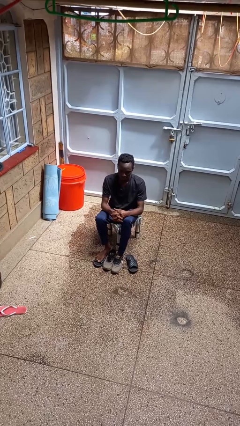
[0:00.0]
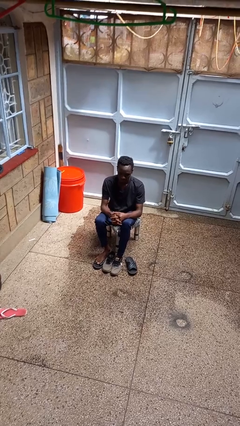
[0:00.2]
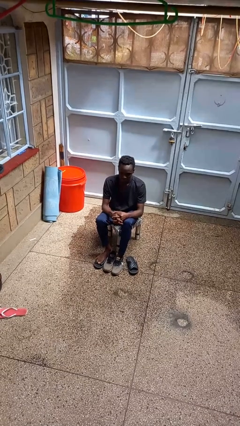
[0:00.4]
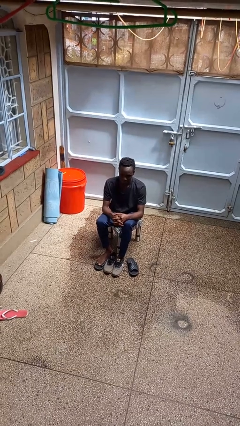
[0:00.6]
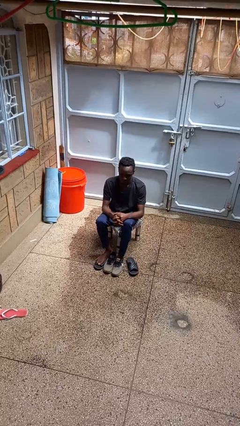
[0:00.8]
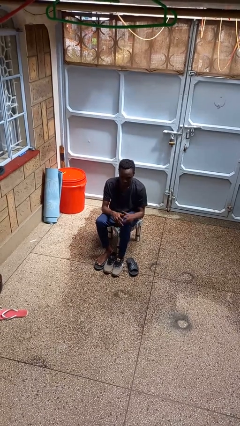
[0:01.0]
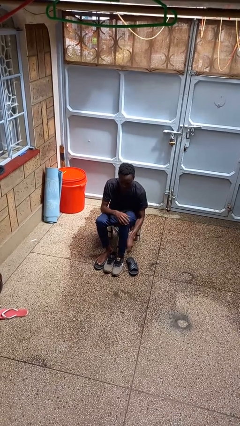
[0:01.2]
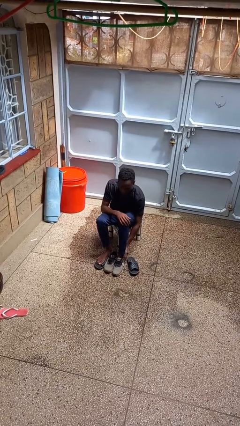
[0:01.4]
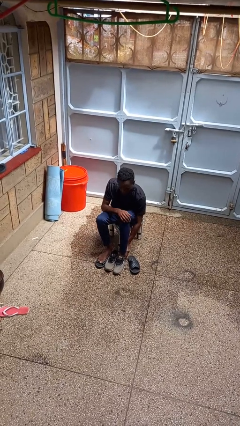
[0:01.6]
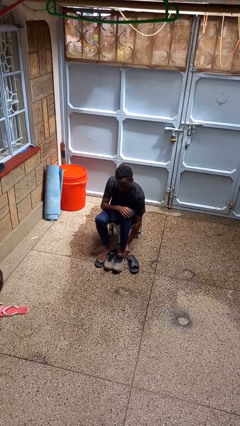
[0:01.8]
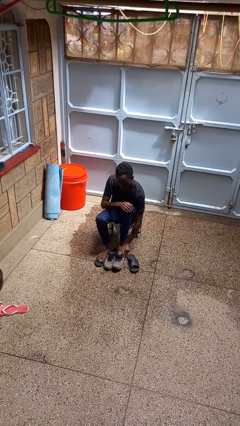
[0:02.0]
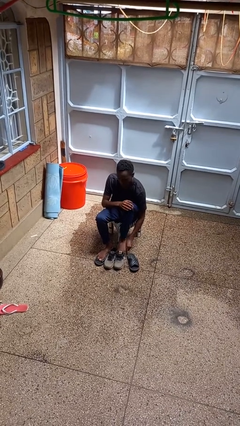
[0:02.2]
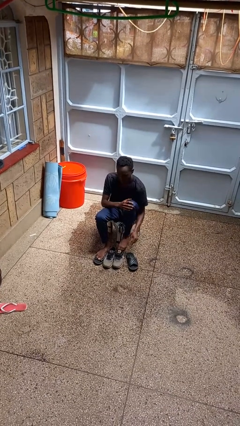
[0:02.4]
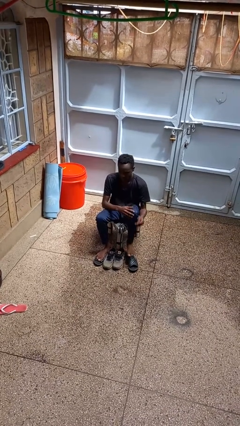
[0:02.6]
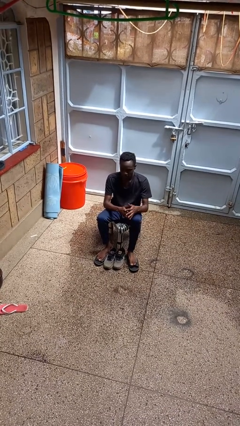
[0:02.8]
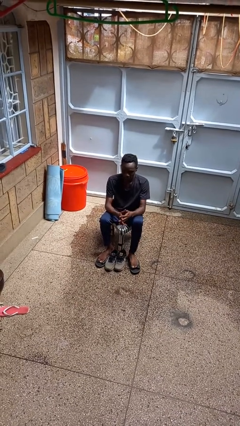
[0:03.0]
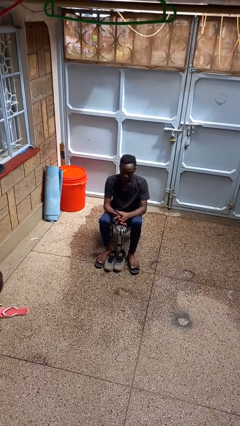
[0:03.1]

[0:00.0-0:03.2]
person takes off shoes

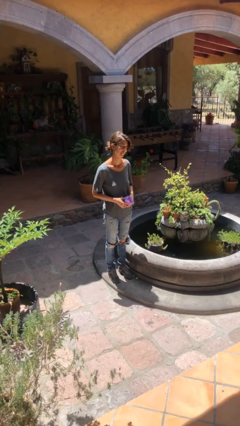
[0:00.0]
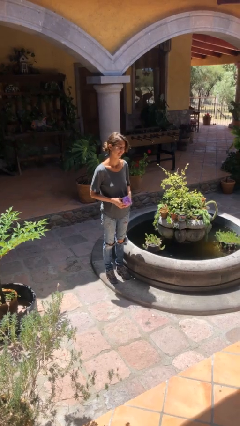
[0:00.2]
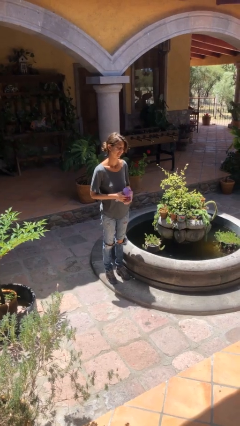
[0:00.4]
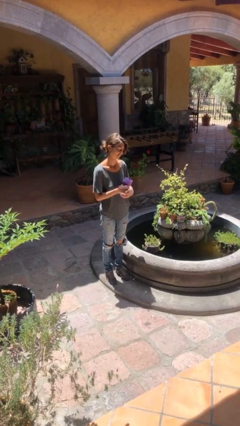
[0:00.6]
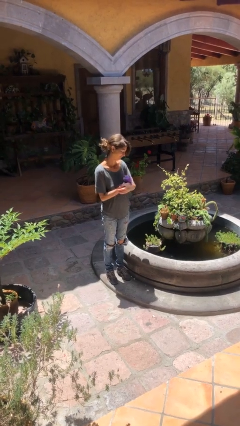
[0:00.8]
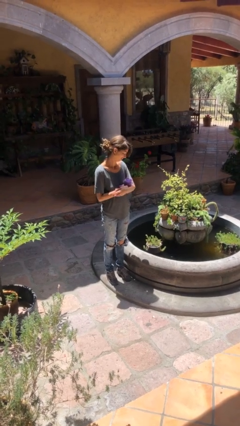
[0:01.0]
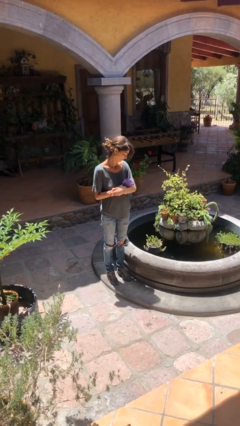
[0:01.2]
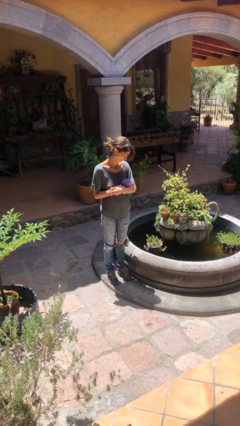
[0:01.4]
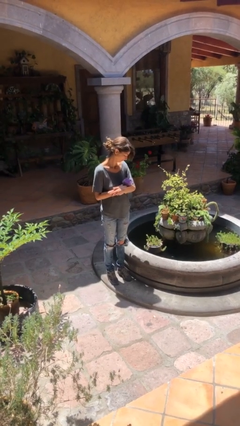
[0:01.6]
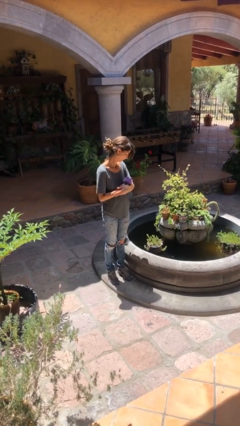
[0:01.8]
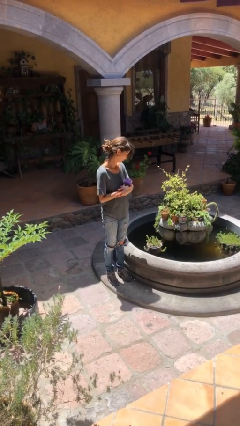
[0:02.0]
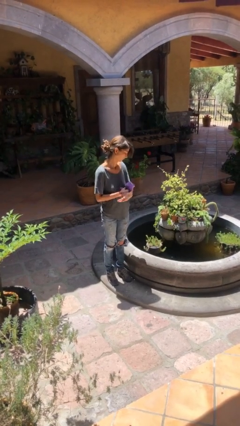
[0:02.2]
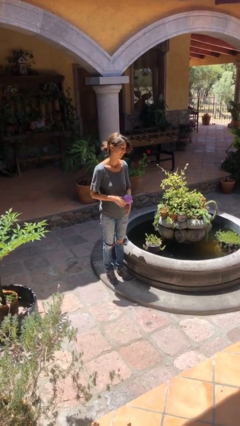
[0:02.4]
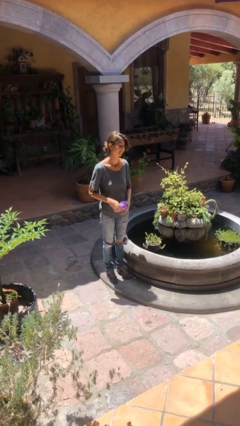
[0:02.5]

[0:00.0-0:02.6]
person hugs stuffed animal

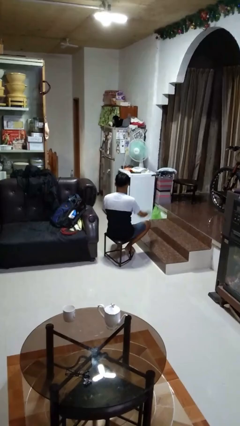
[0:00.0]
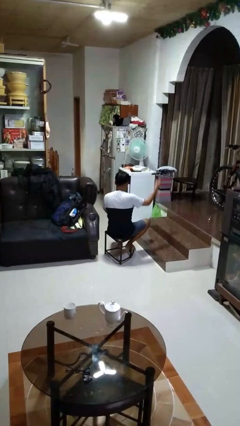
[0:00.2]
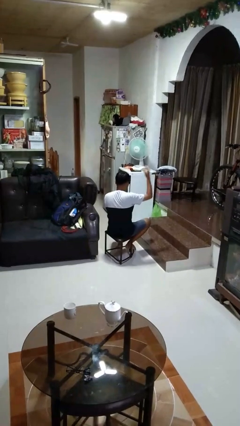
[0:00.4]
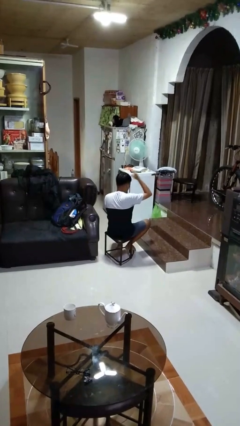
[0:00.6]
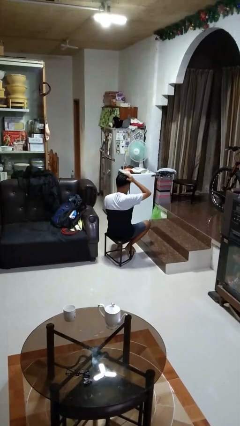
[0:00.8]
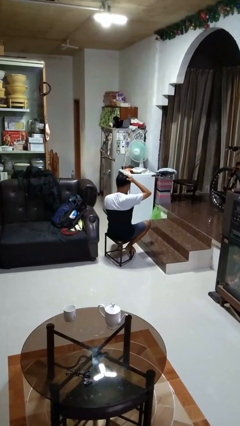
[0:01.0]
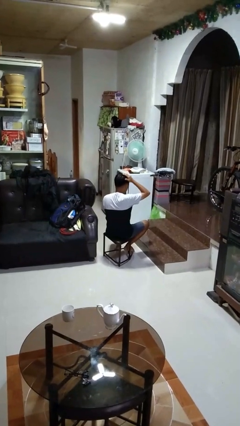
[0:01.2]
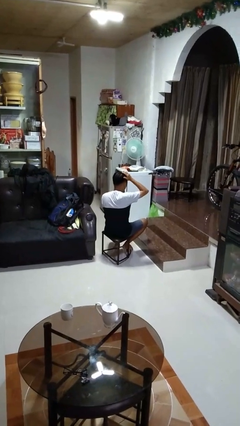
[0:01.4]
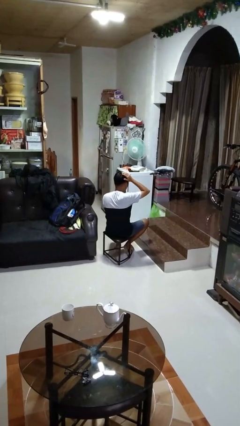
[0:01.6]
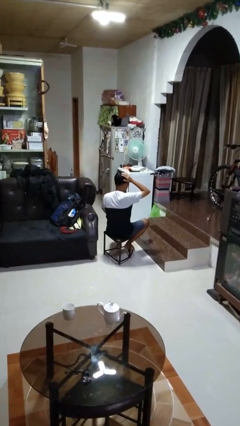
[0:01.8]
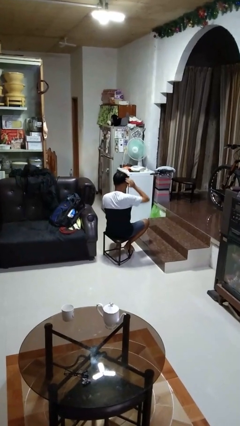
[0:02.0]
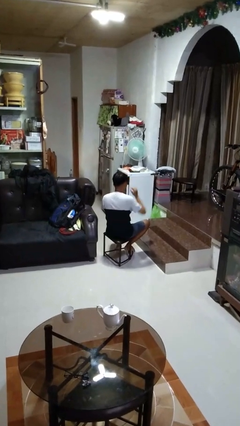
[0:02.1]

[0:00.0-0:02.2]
person pats head

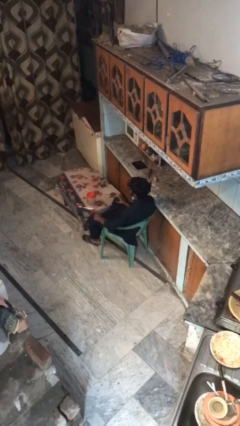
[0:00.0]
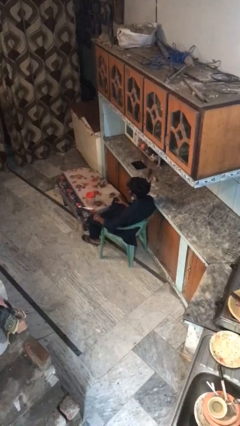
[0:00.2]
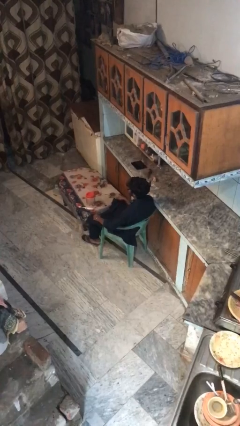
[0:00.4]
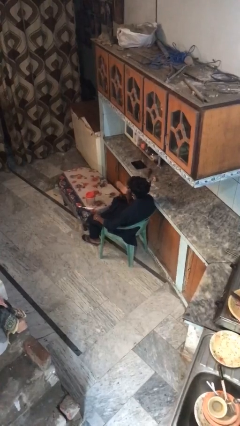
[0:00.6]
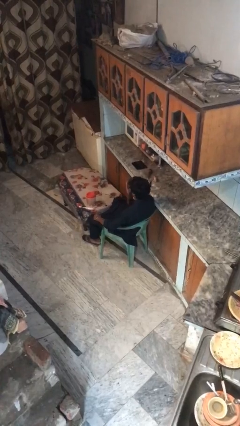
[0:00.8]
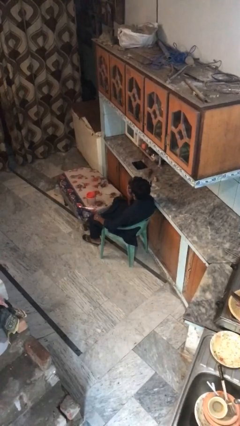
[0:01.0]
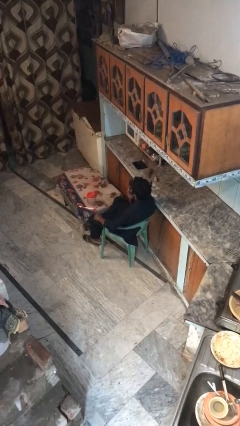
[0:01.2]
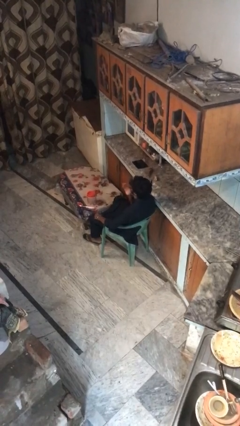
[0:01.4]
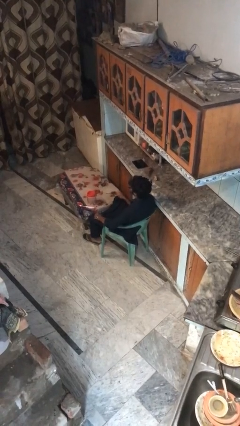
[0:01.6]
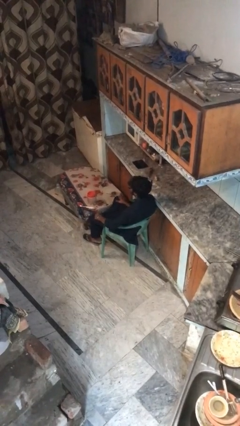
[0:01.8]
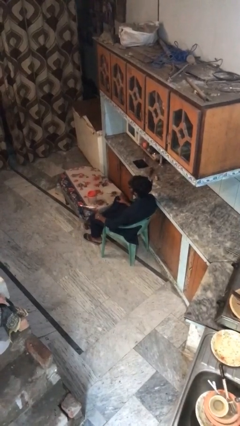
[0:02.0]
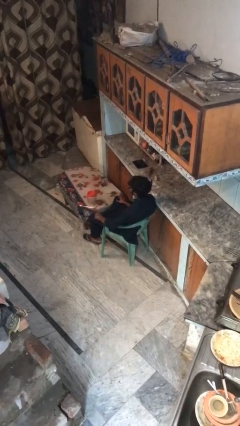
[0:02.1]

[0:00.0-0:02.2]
person licks fingers

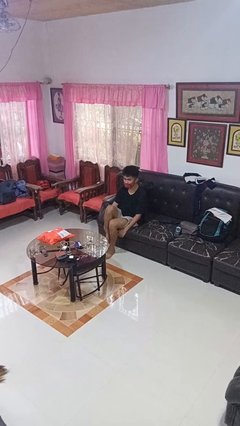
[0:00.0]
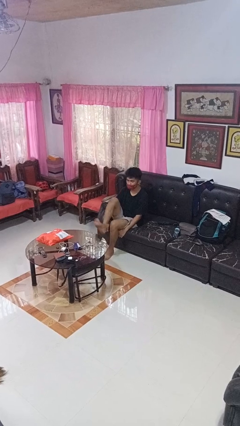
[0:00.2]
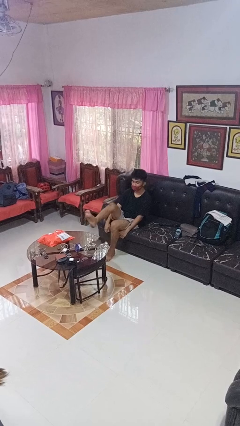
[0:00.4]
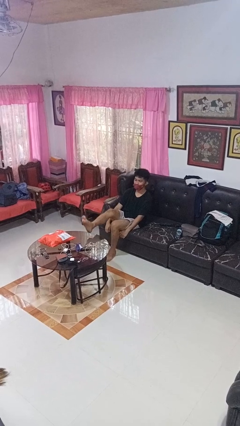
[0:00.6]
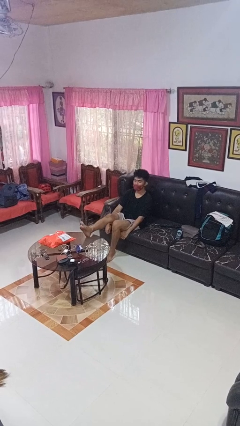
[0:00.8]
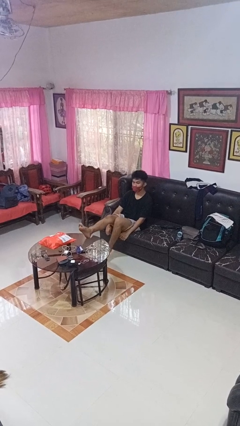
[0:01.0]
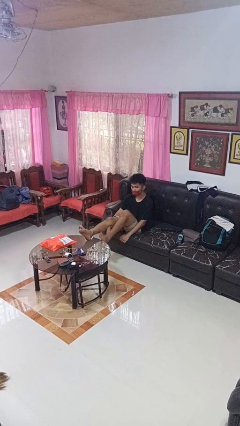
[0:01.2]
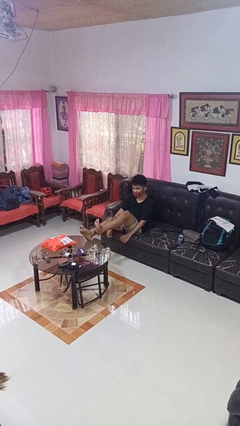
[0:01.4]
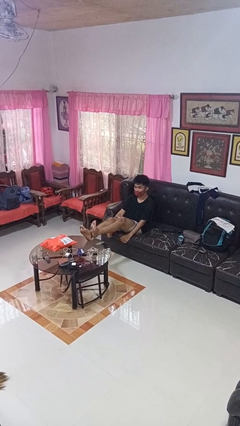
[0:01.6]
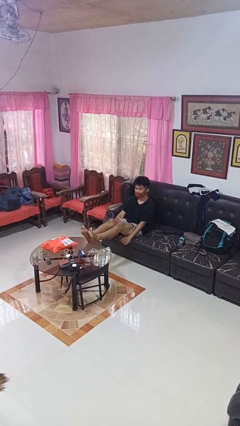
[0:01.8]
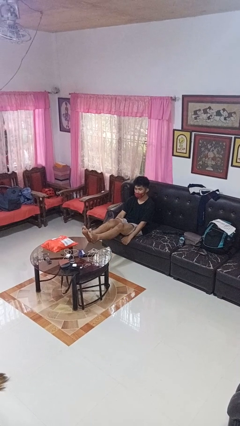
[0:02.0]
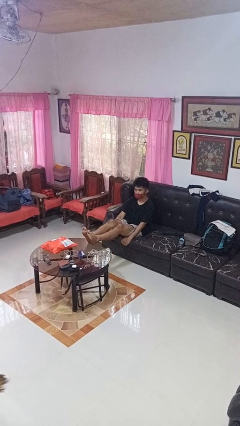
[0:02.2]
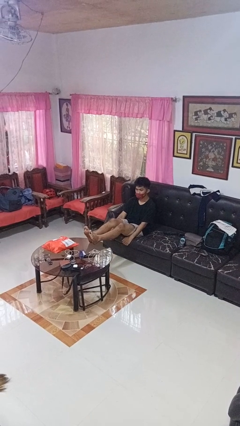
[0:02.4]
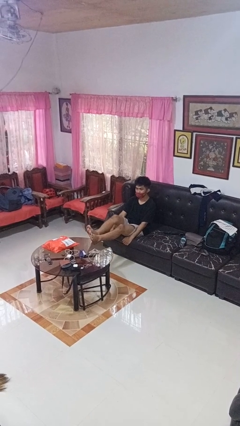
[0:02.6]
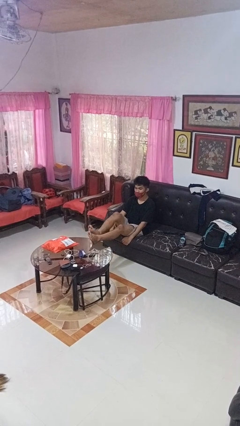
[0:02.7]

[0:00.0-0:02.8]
person puts feet up

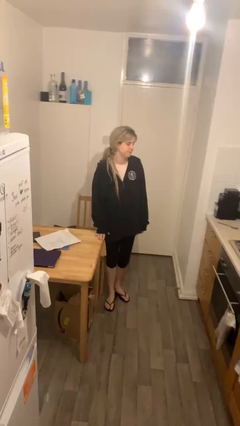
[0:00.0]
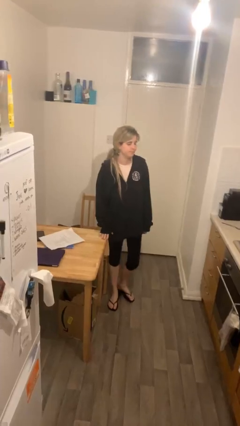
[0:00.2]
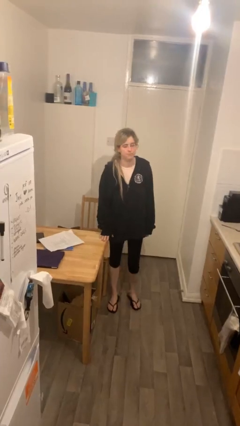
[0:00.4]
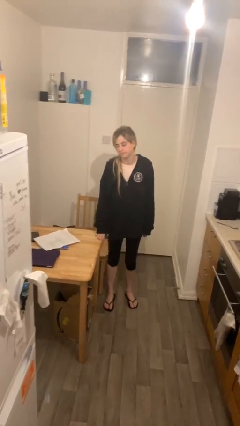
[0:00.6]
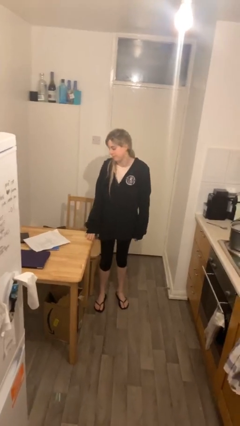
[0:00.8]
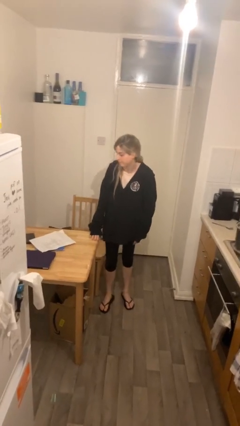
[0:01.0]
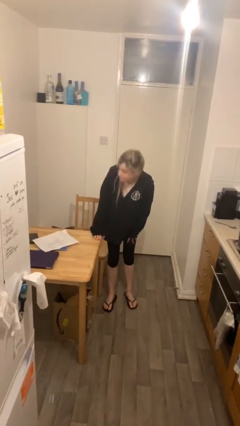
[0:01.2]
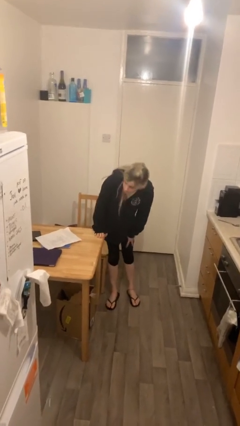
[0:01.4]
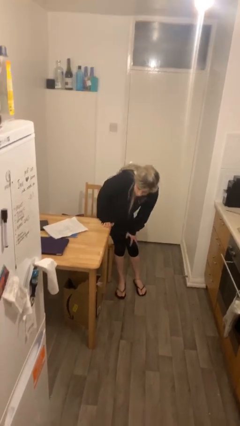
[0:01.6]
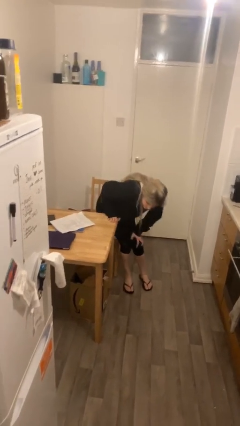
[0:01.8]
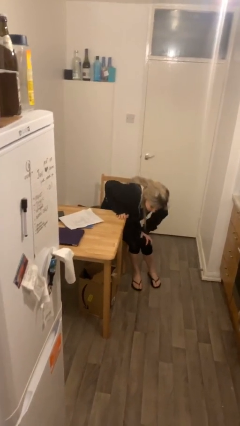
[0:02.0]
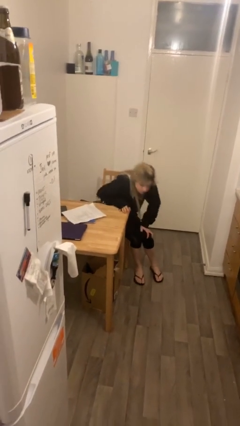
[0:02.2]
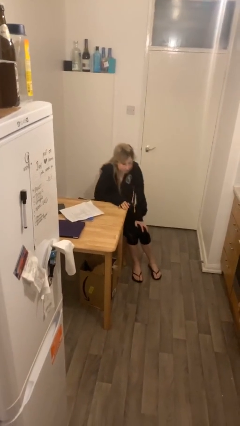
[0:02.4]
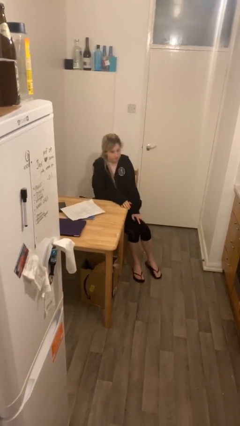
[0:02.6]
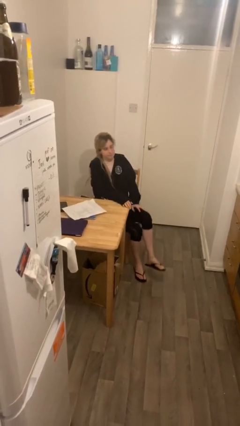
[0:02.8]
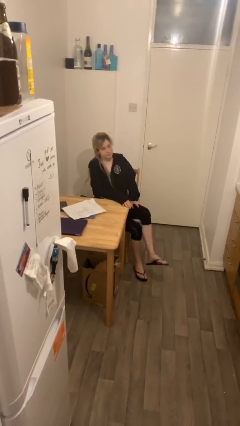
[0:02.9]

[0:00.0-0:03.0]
person sits down

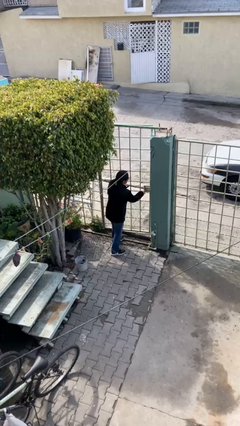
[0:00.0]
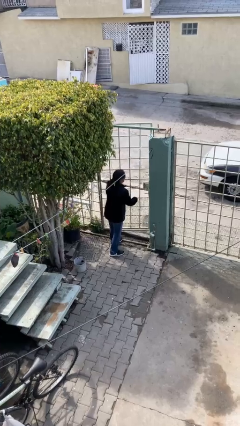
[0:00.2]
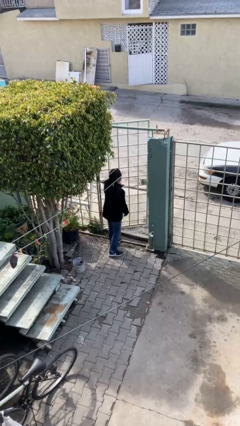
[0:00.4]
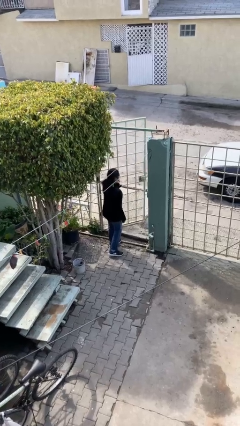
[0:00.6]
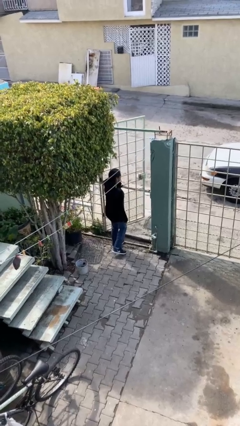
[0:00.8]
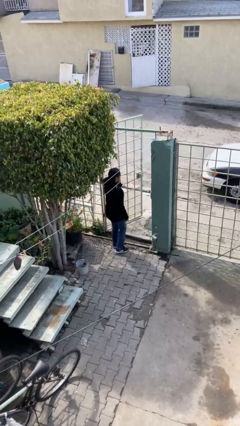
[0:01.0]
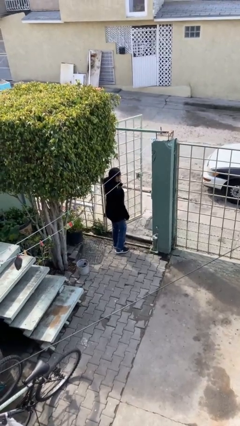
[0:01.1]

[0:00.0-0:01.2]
person opens facility door
